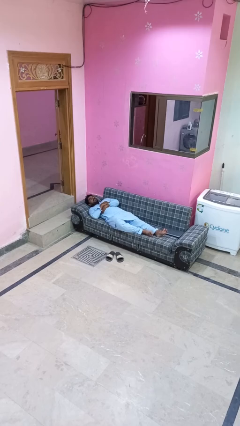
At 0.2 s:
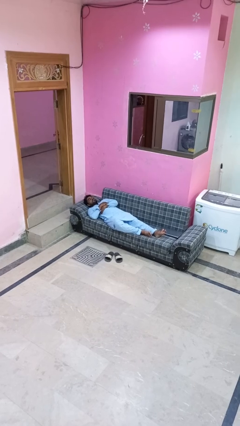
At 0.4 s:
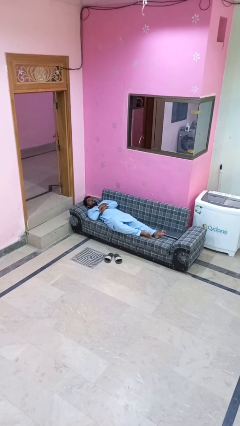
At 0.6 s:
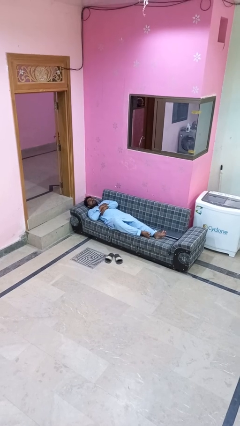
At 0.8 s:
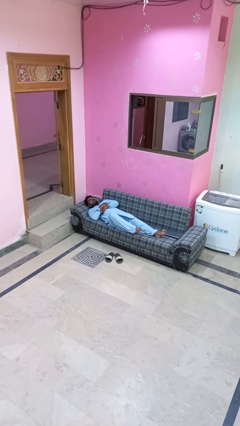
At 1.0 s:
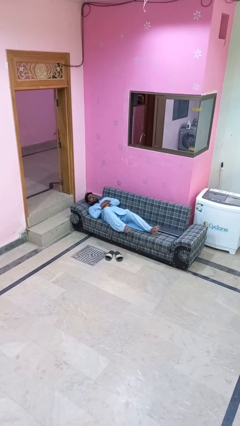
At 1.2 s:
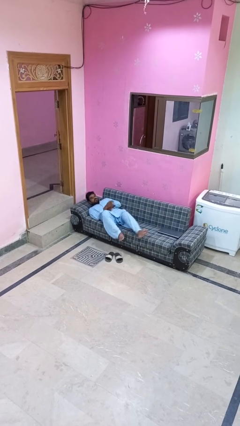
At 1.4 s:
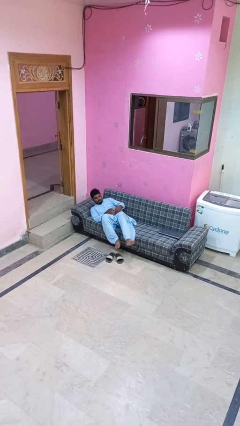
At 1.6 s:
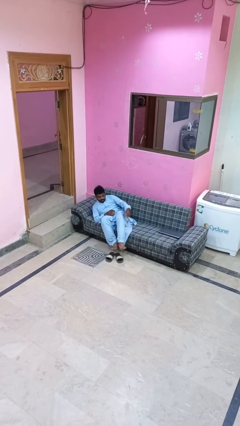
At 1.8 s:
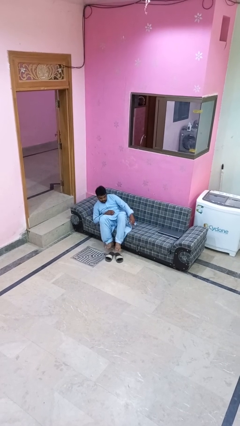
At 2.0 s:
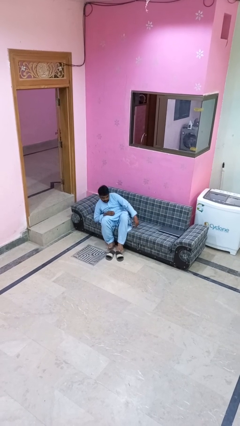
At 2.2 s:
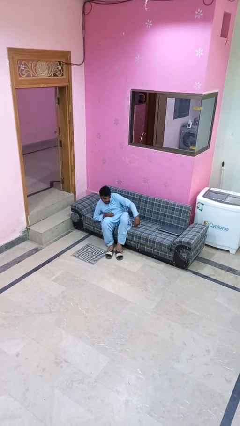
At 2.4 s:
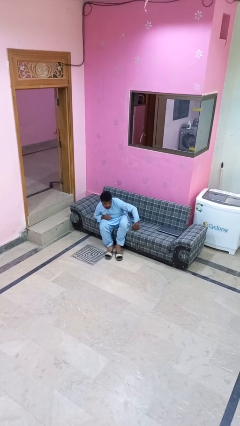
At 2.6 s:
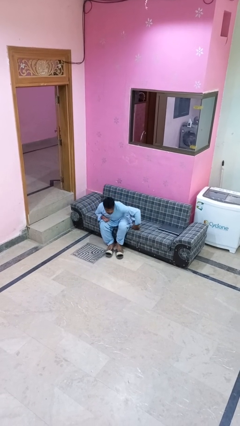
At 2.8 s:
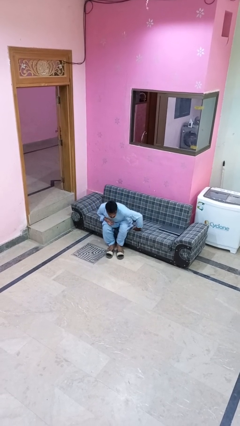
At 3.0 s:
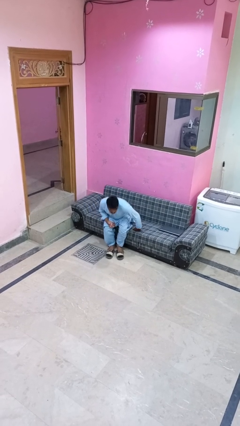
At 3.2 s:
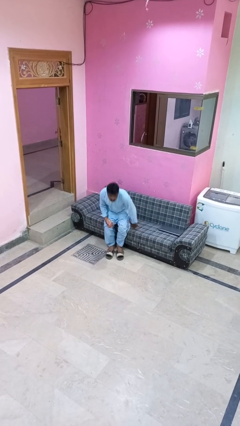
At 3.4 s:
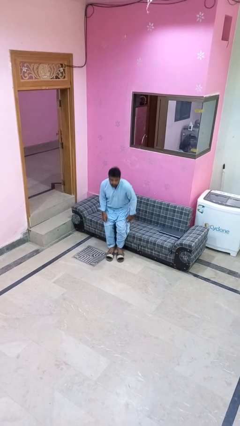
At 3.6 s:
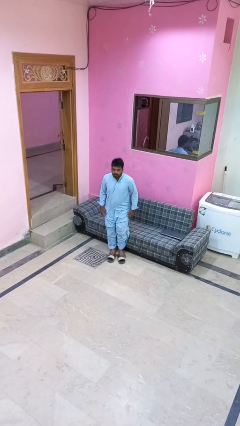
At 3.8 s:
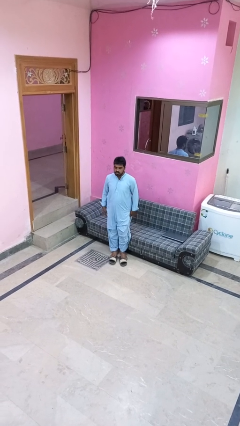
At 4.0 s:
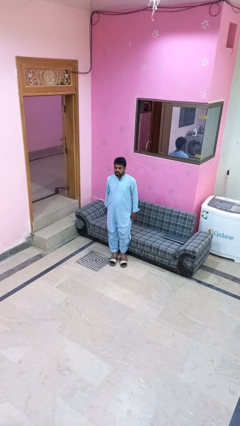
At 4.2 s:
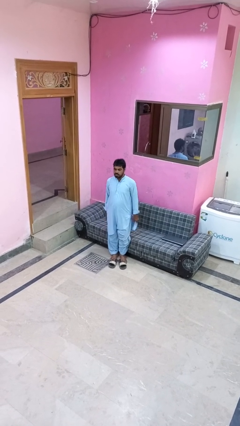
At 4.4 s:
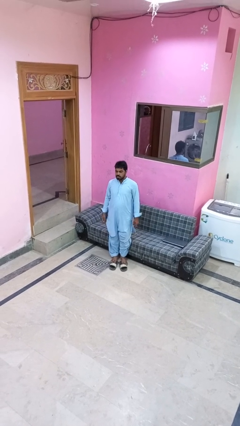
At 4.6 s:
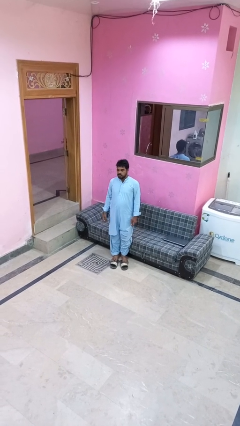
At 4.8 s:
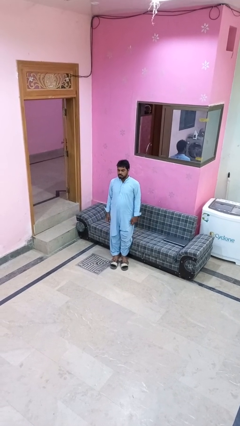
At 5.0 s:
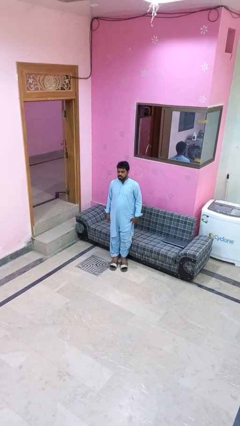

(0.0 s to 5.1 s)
person stands up

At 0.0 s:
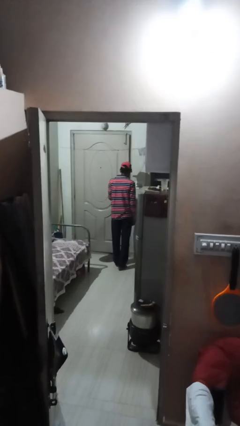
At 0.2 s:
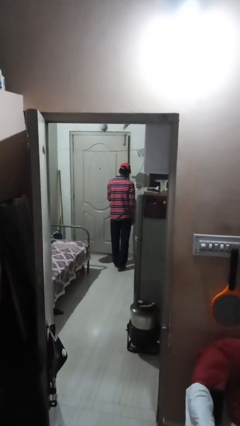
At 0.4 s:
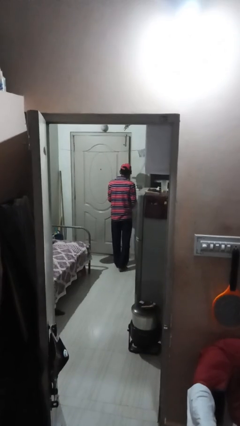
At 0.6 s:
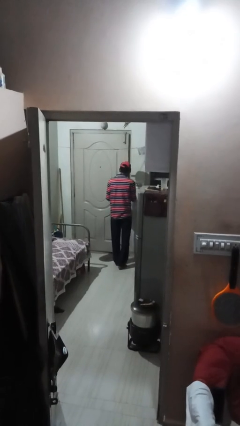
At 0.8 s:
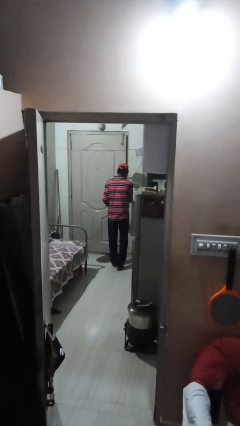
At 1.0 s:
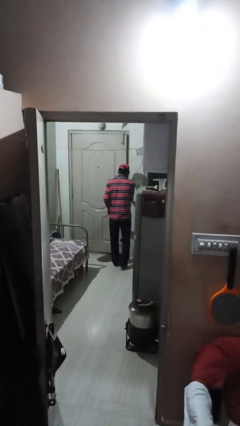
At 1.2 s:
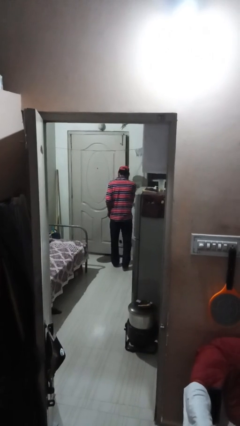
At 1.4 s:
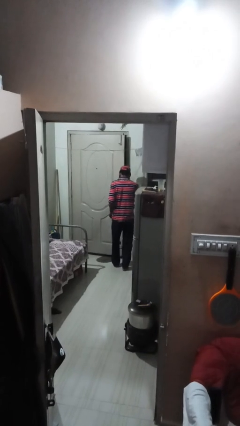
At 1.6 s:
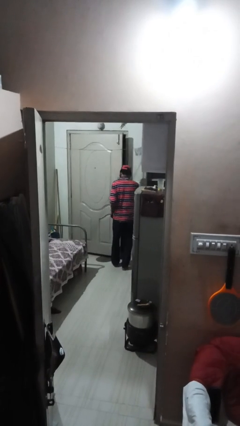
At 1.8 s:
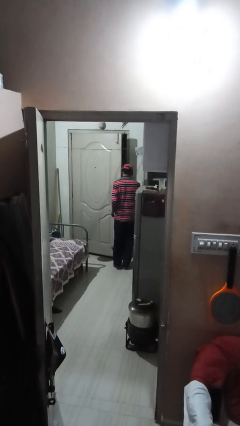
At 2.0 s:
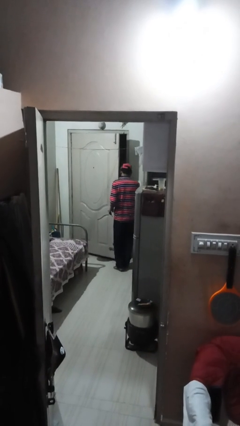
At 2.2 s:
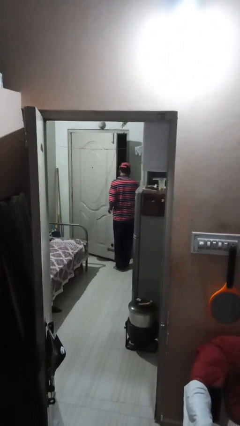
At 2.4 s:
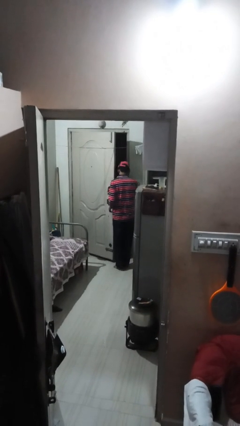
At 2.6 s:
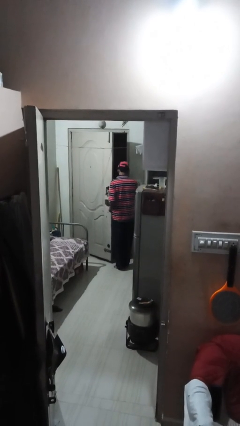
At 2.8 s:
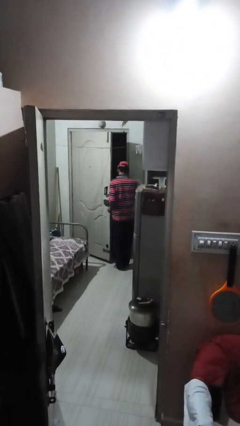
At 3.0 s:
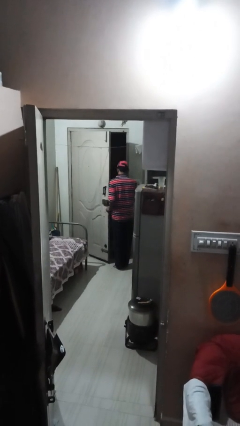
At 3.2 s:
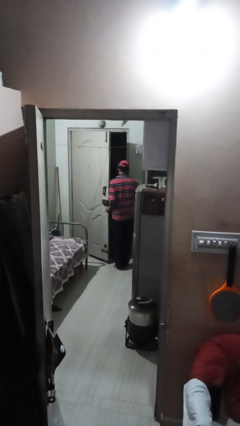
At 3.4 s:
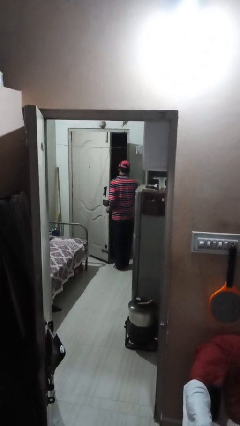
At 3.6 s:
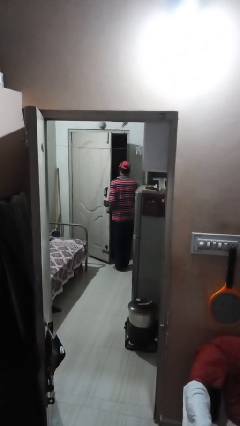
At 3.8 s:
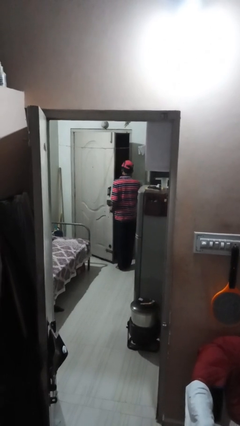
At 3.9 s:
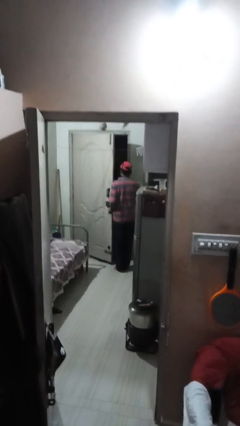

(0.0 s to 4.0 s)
person opens facility door

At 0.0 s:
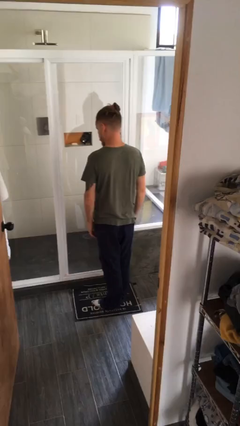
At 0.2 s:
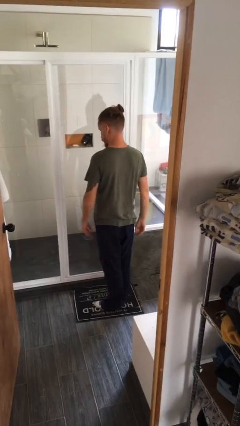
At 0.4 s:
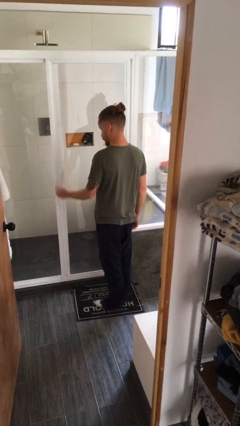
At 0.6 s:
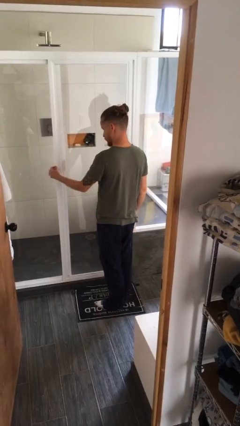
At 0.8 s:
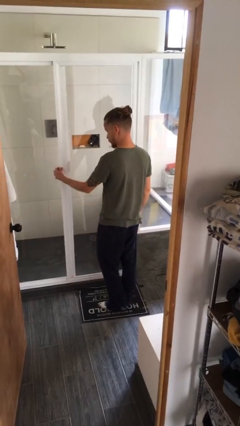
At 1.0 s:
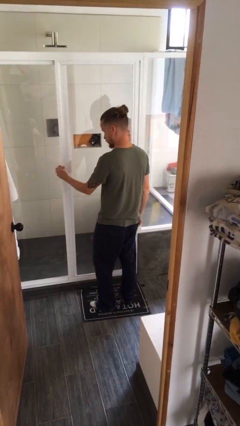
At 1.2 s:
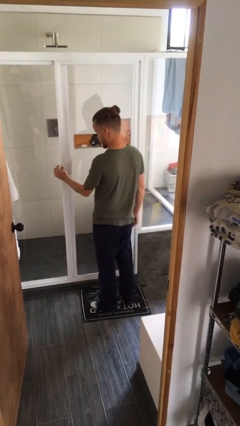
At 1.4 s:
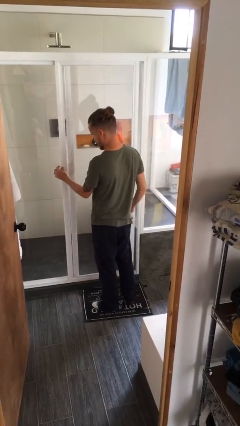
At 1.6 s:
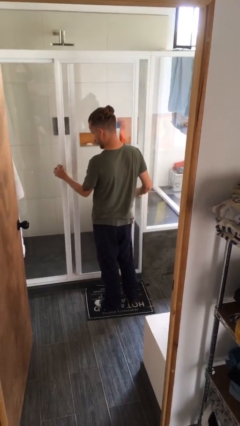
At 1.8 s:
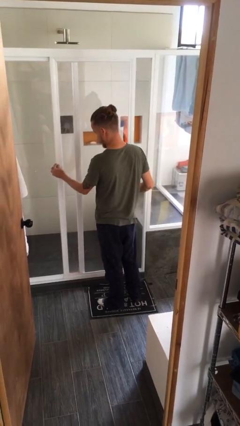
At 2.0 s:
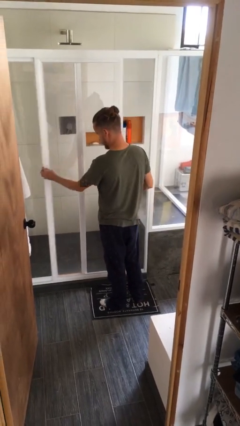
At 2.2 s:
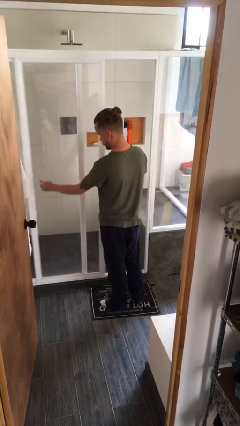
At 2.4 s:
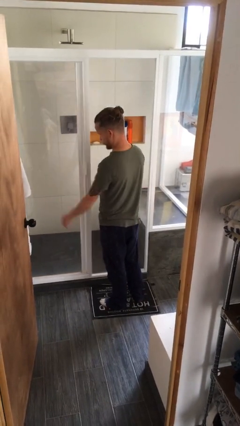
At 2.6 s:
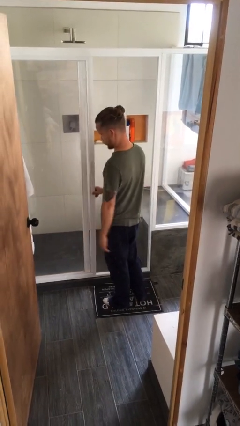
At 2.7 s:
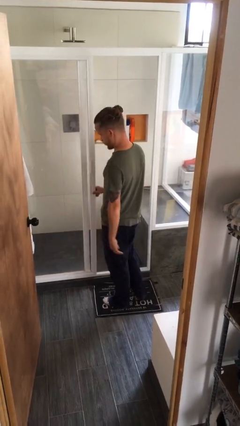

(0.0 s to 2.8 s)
person opens sliding door

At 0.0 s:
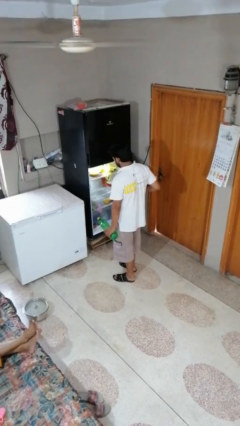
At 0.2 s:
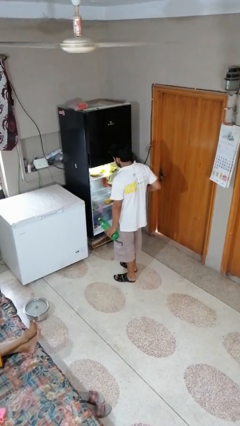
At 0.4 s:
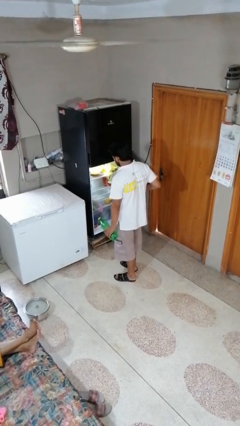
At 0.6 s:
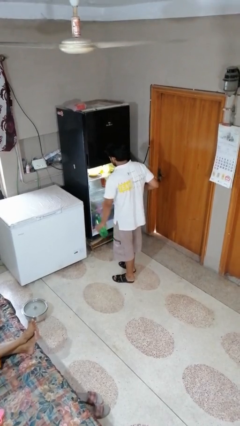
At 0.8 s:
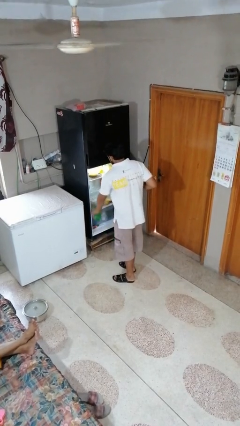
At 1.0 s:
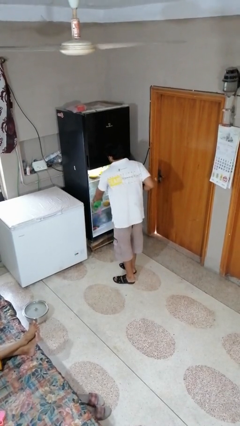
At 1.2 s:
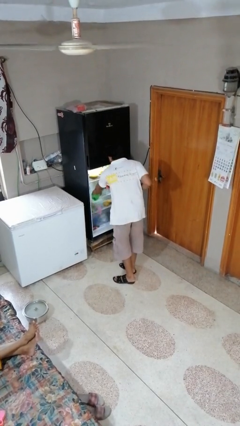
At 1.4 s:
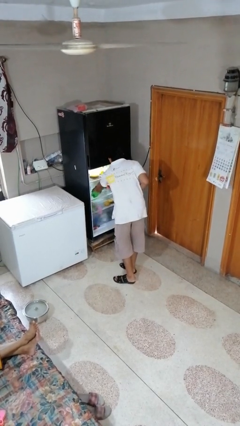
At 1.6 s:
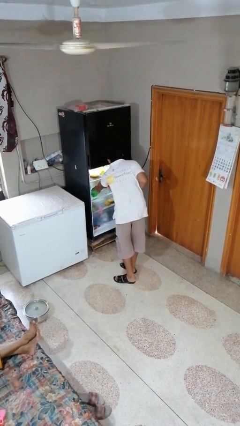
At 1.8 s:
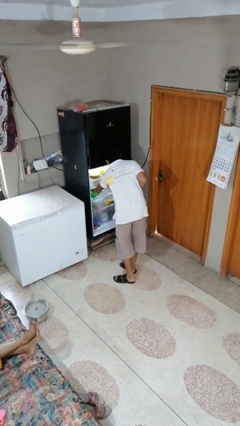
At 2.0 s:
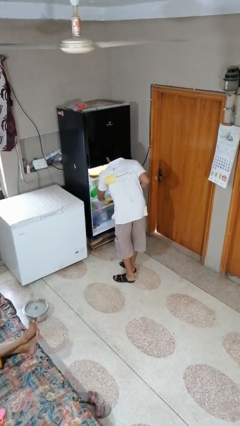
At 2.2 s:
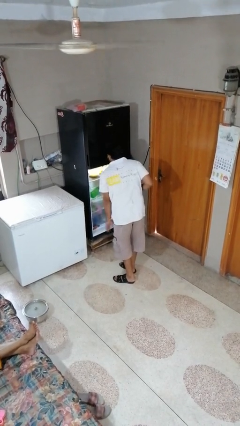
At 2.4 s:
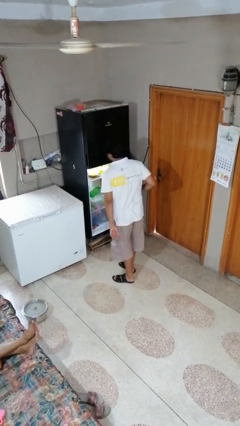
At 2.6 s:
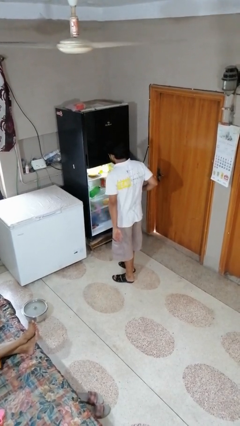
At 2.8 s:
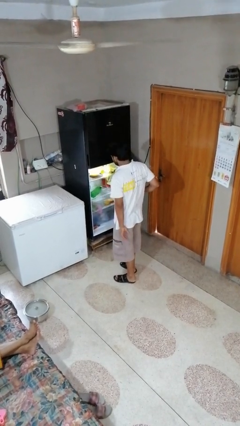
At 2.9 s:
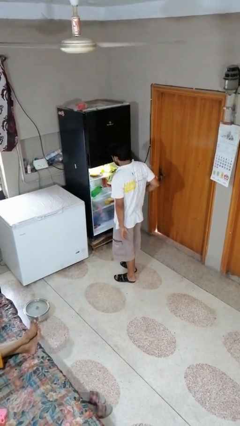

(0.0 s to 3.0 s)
person puts object into refrigerator

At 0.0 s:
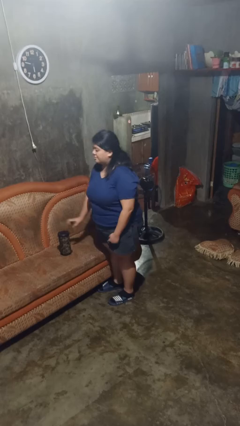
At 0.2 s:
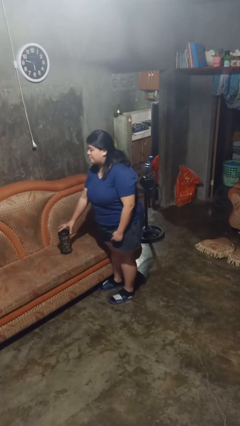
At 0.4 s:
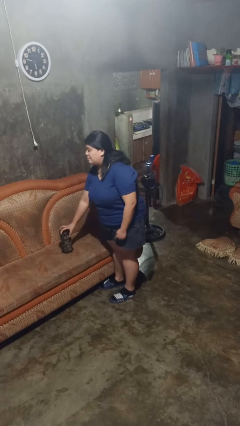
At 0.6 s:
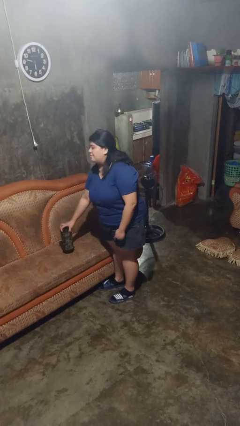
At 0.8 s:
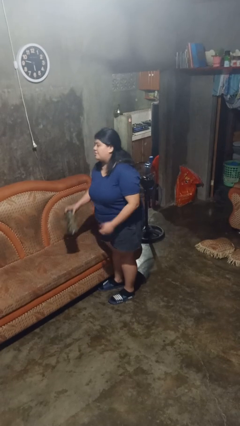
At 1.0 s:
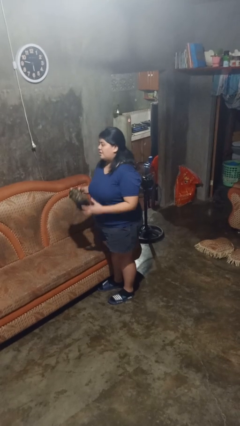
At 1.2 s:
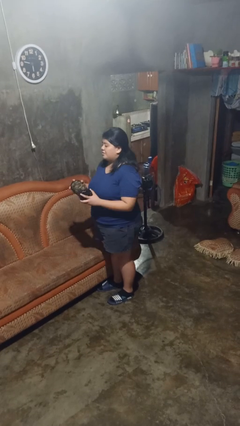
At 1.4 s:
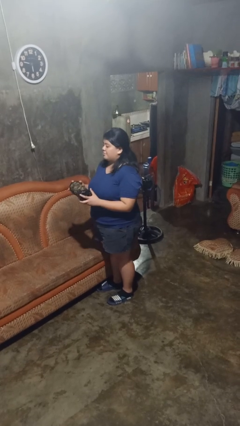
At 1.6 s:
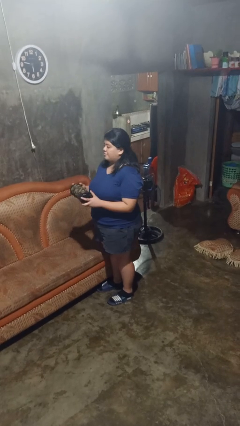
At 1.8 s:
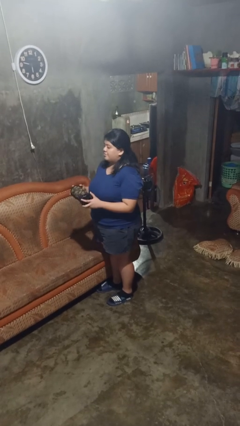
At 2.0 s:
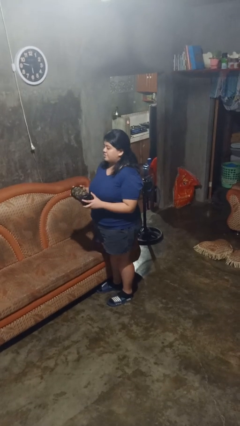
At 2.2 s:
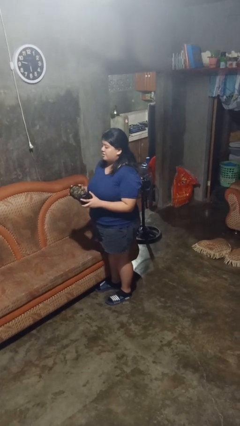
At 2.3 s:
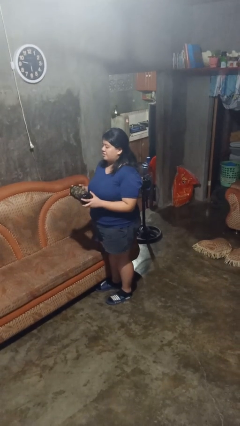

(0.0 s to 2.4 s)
person picks up object from couch

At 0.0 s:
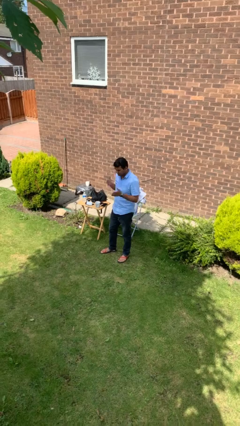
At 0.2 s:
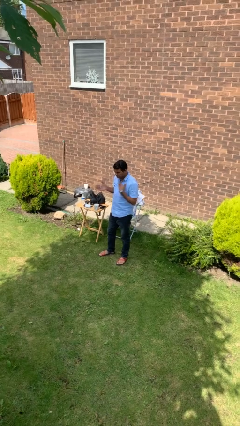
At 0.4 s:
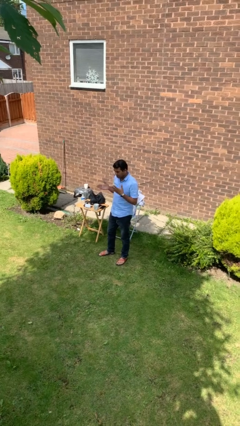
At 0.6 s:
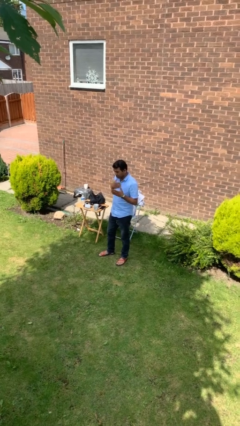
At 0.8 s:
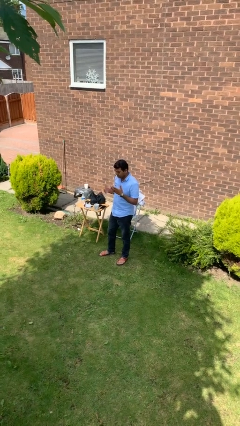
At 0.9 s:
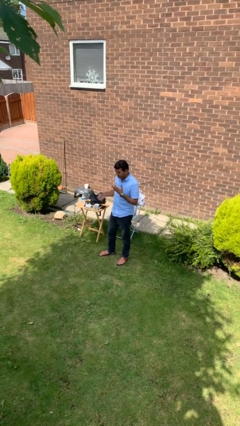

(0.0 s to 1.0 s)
person drums on chest
